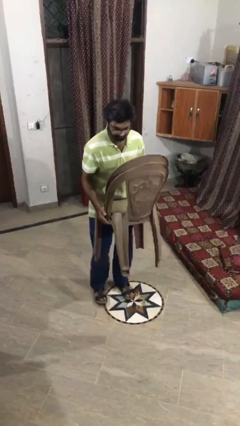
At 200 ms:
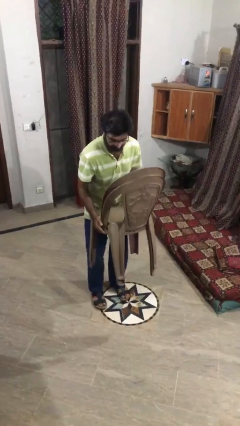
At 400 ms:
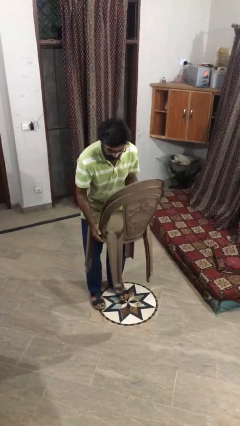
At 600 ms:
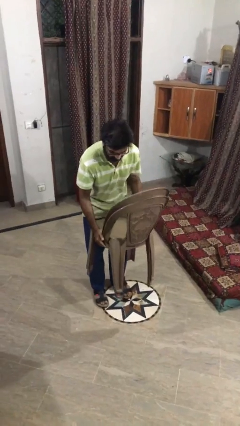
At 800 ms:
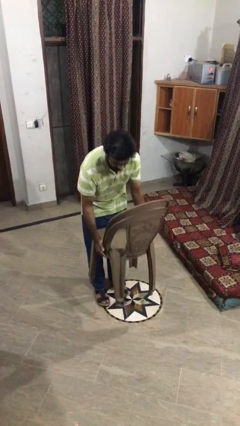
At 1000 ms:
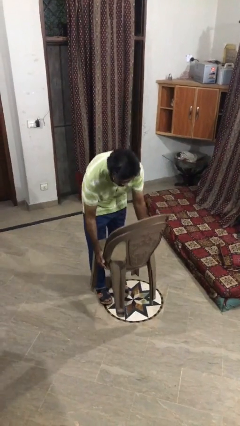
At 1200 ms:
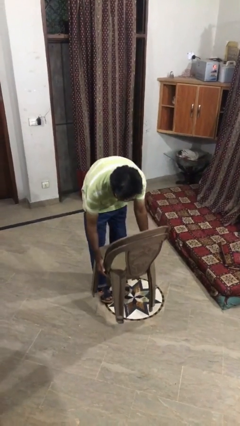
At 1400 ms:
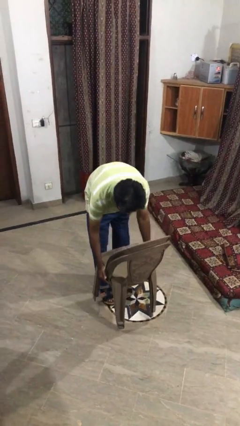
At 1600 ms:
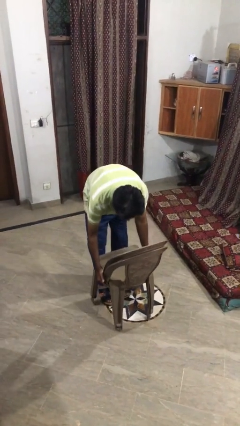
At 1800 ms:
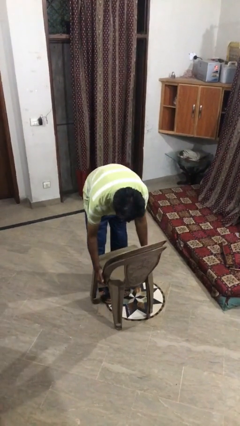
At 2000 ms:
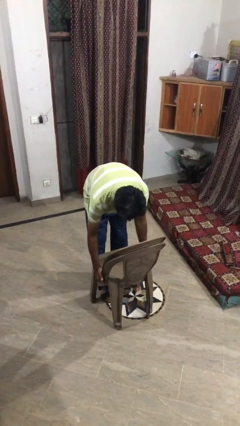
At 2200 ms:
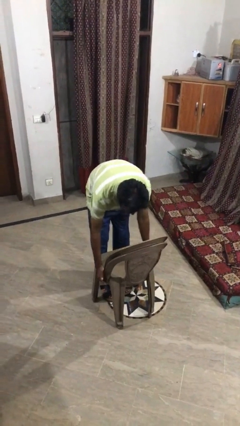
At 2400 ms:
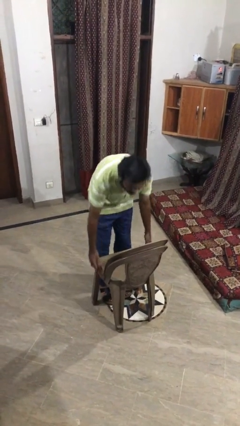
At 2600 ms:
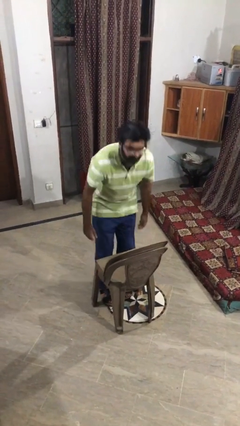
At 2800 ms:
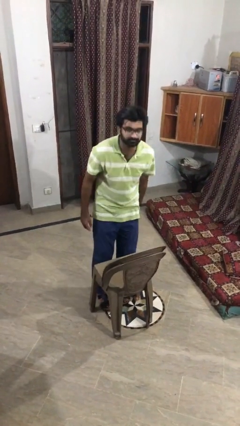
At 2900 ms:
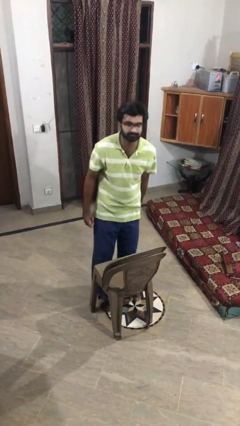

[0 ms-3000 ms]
person puts down object on floor

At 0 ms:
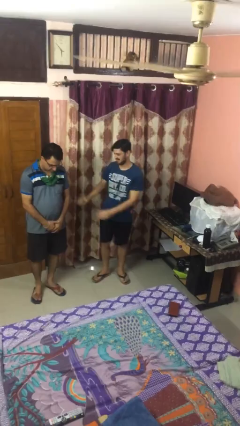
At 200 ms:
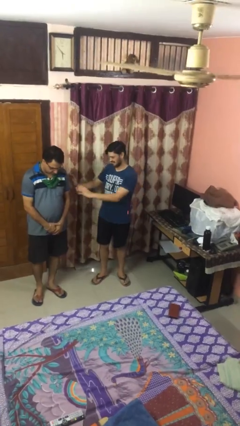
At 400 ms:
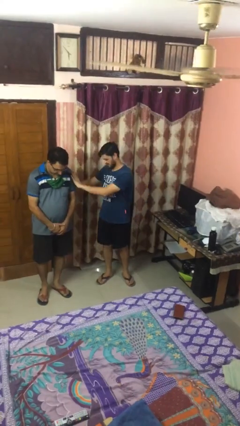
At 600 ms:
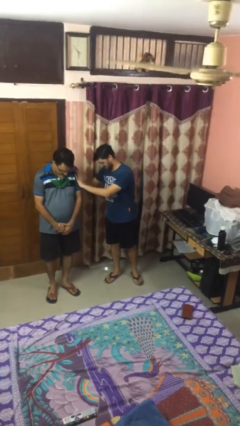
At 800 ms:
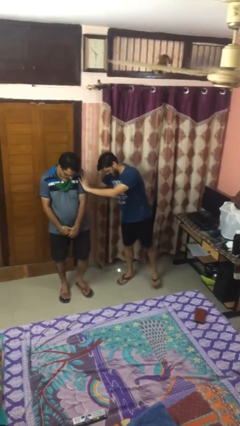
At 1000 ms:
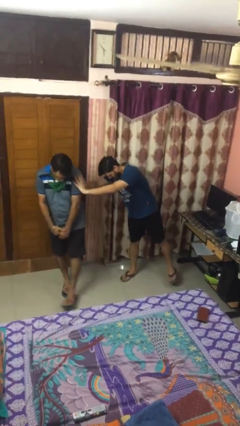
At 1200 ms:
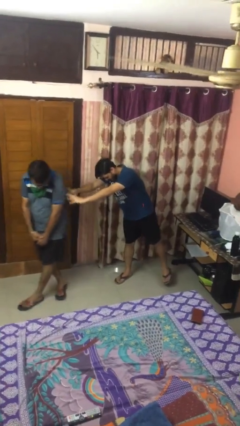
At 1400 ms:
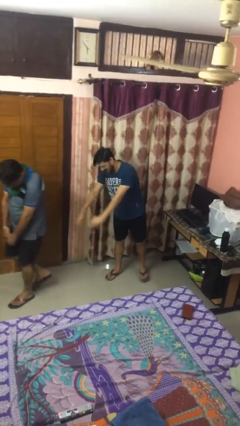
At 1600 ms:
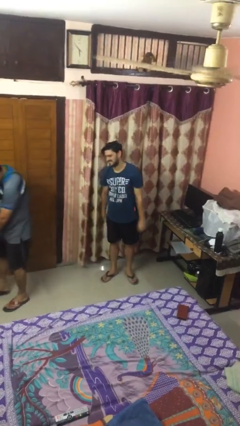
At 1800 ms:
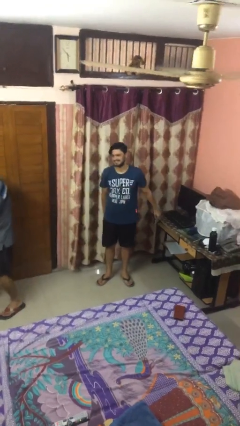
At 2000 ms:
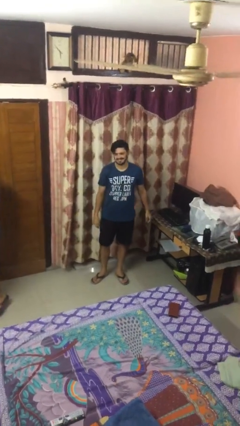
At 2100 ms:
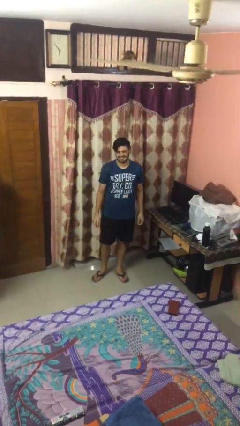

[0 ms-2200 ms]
person shoves person

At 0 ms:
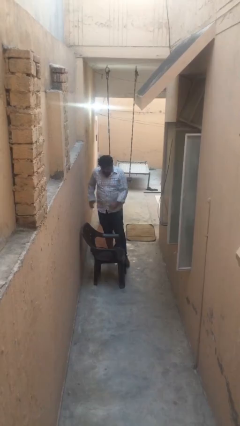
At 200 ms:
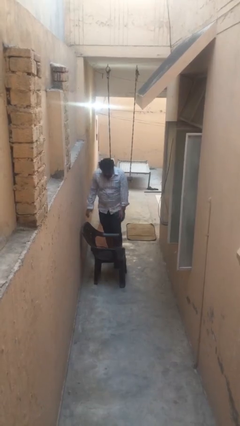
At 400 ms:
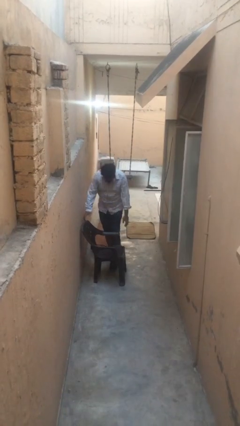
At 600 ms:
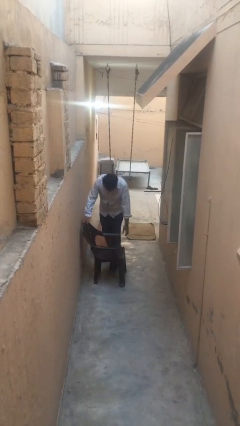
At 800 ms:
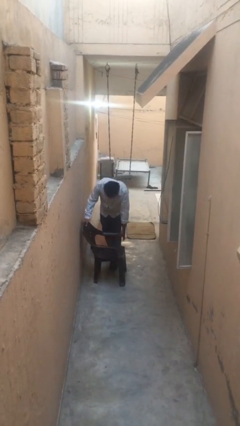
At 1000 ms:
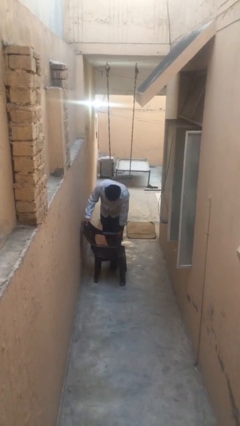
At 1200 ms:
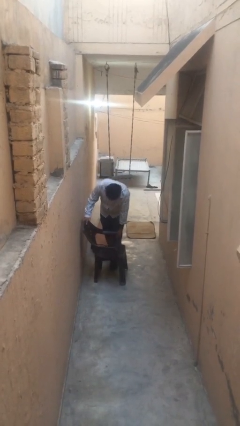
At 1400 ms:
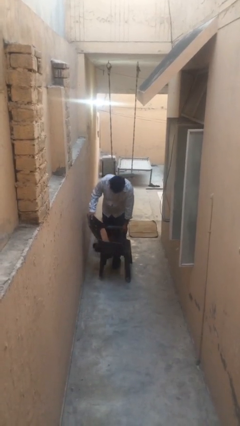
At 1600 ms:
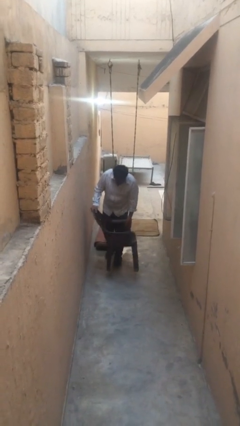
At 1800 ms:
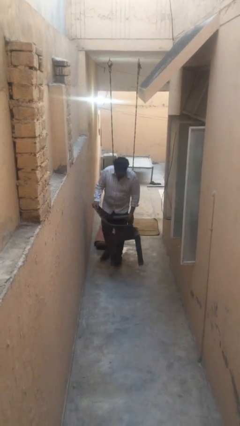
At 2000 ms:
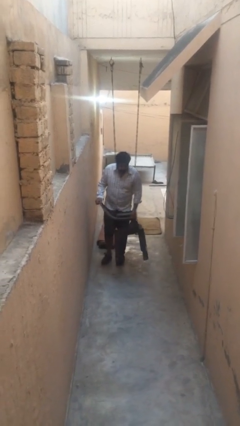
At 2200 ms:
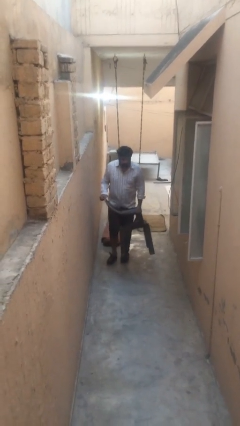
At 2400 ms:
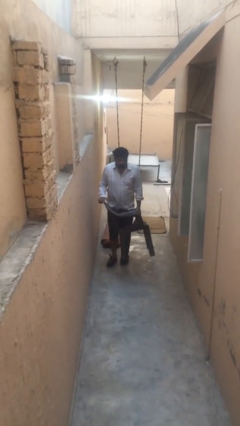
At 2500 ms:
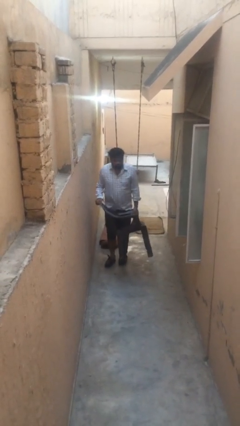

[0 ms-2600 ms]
person picks up object from floor

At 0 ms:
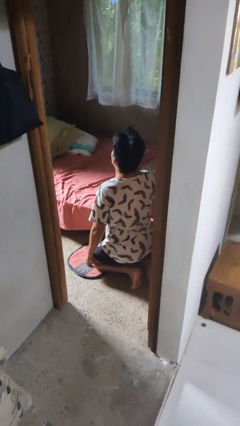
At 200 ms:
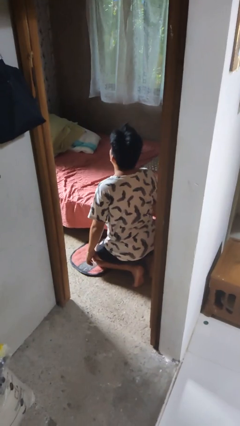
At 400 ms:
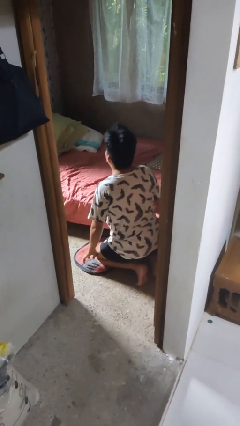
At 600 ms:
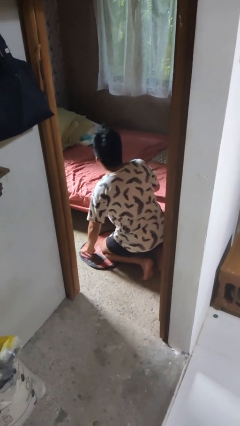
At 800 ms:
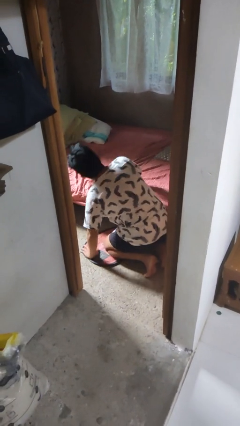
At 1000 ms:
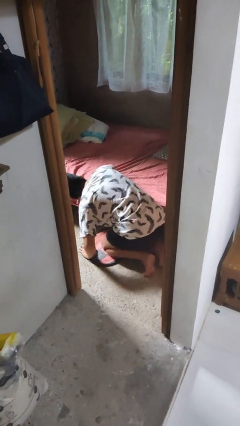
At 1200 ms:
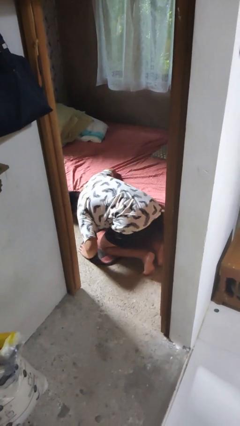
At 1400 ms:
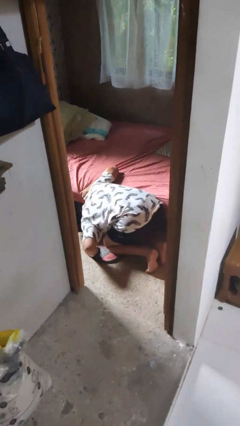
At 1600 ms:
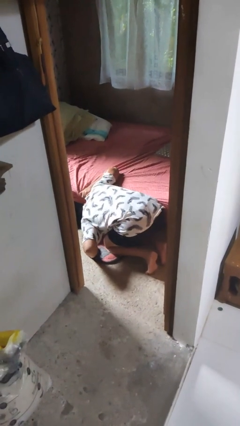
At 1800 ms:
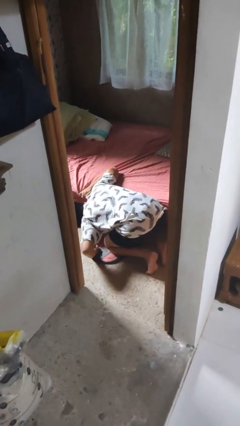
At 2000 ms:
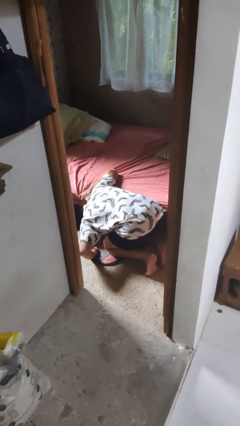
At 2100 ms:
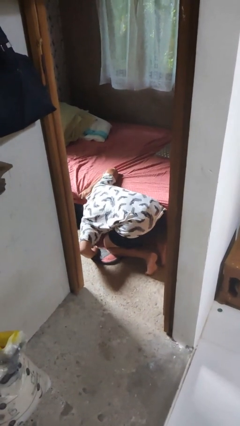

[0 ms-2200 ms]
person searches under bed

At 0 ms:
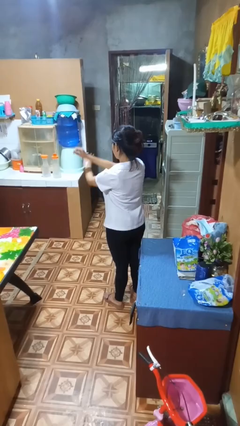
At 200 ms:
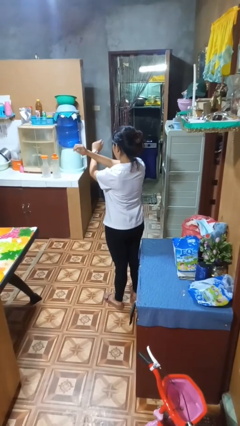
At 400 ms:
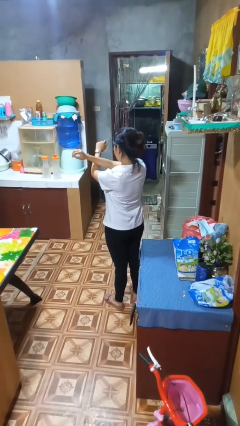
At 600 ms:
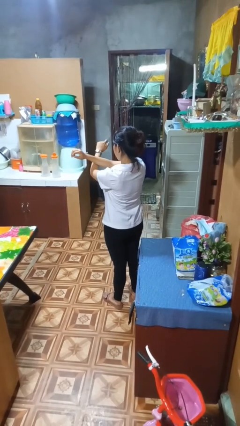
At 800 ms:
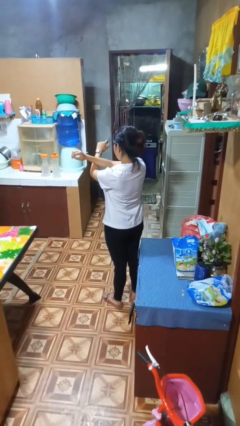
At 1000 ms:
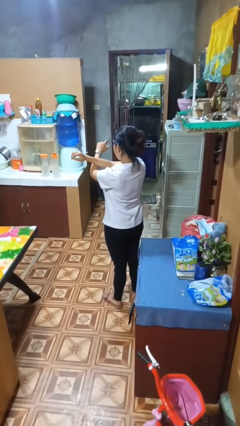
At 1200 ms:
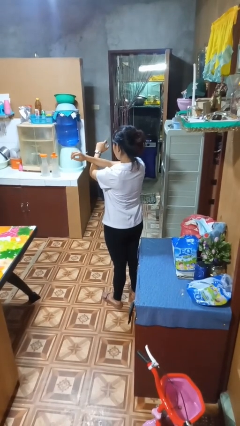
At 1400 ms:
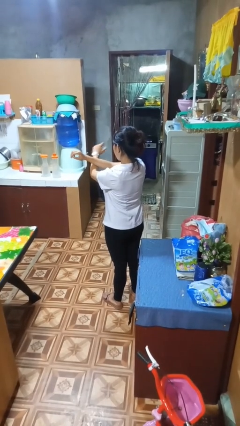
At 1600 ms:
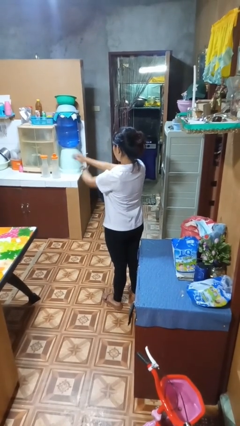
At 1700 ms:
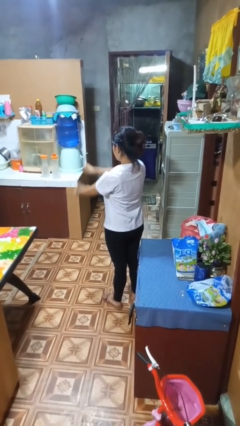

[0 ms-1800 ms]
person crosses arms

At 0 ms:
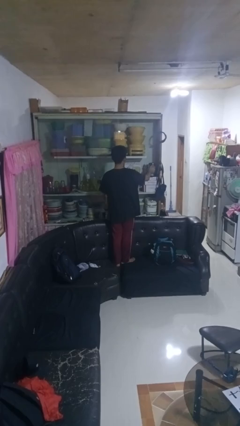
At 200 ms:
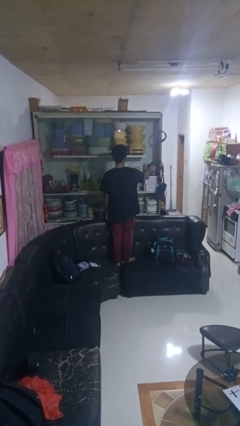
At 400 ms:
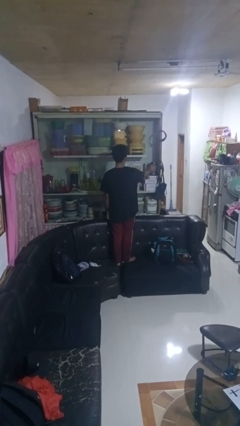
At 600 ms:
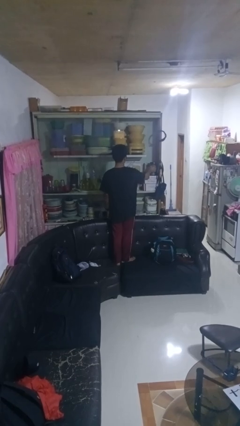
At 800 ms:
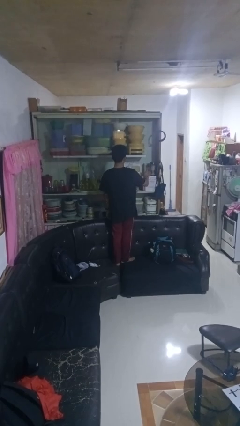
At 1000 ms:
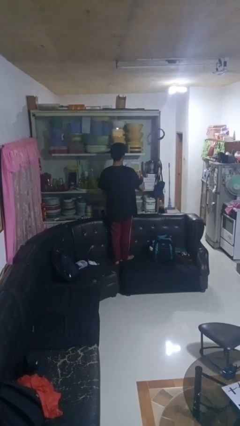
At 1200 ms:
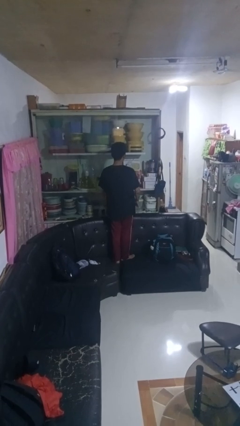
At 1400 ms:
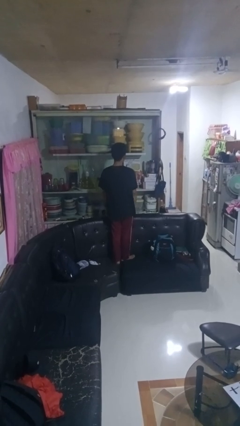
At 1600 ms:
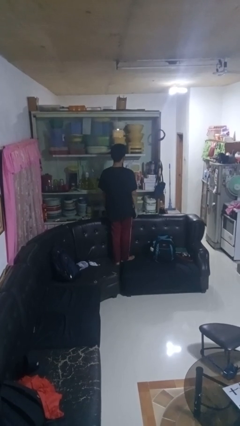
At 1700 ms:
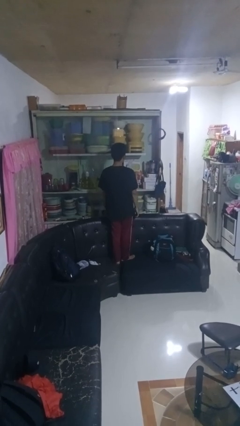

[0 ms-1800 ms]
person puts down object into cabinet

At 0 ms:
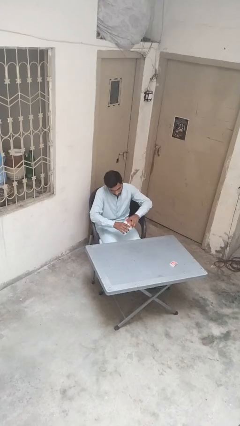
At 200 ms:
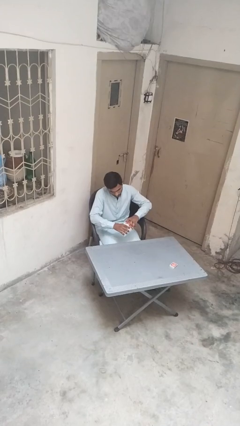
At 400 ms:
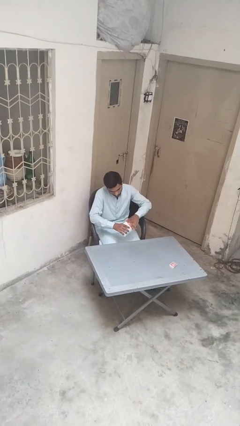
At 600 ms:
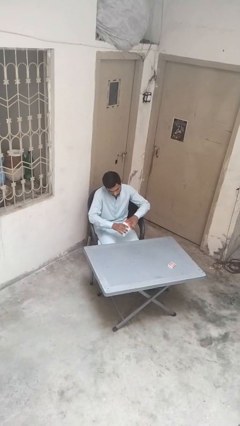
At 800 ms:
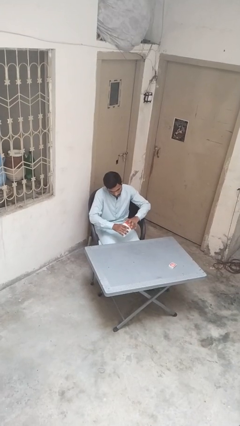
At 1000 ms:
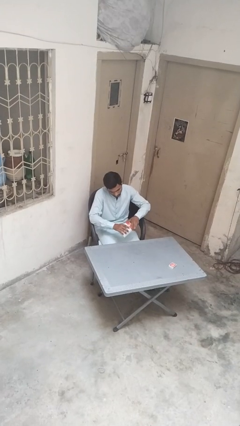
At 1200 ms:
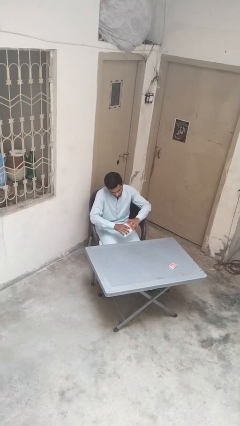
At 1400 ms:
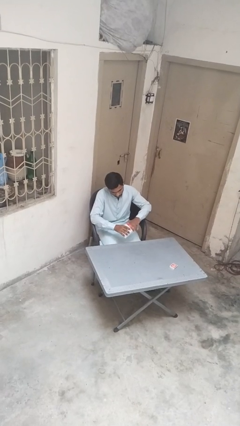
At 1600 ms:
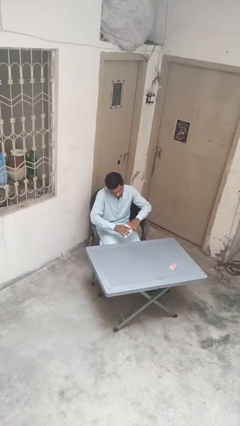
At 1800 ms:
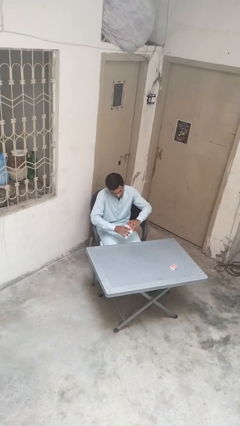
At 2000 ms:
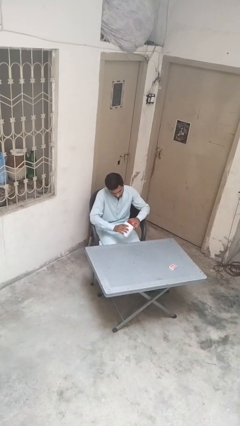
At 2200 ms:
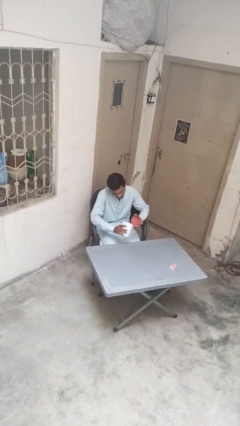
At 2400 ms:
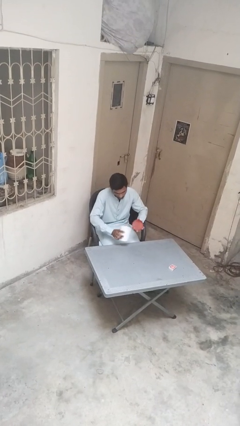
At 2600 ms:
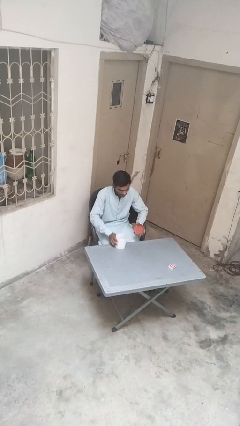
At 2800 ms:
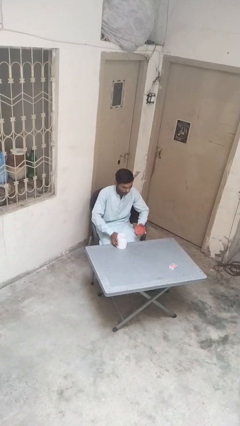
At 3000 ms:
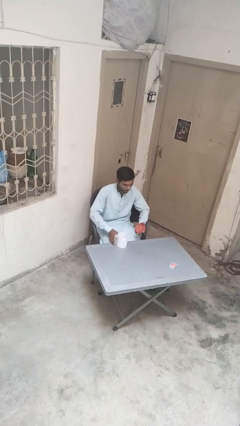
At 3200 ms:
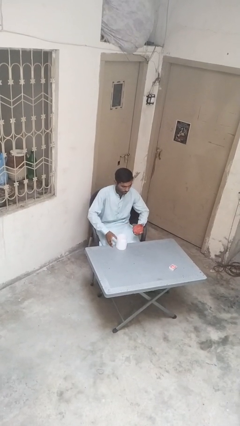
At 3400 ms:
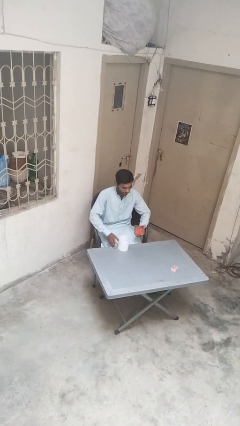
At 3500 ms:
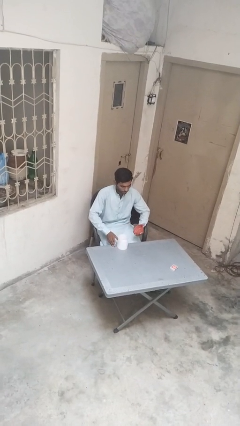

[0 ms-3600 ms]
person opens jar
